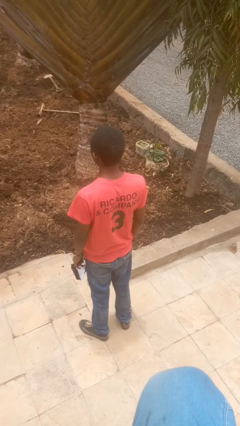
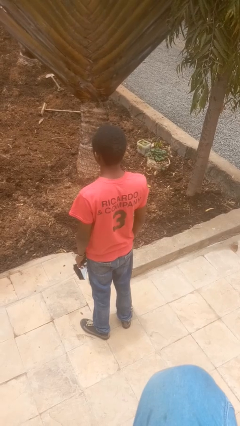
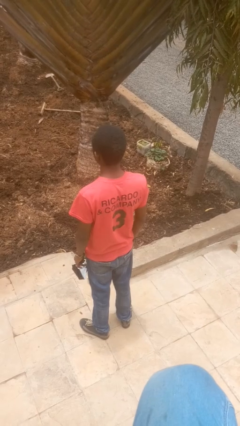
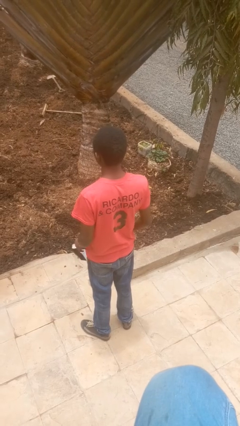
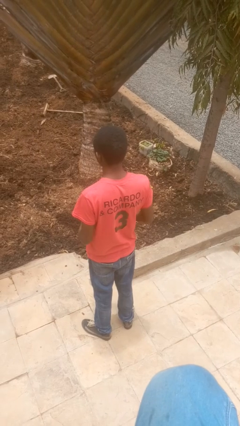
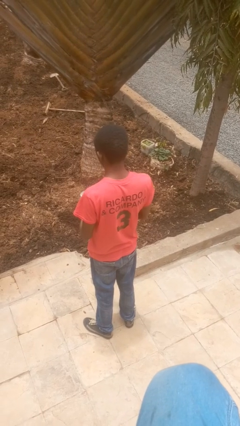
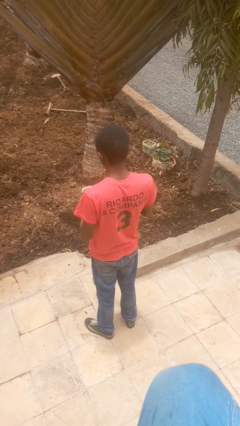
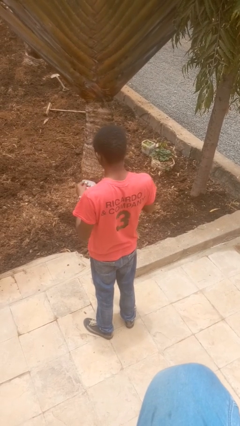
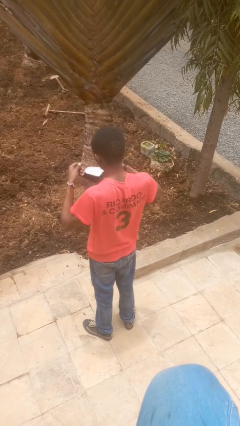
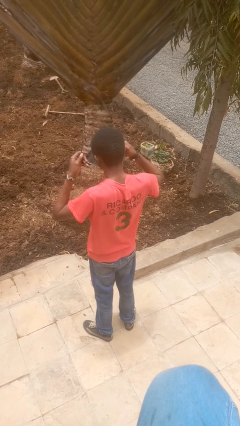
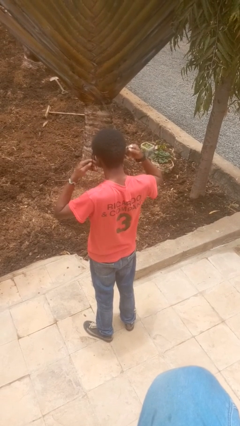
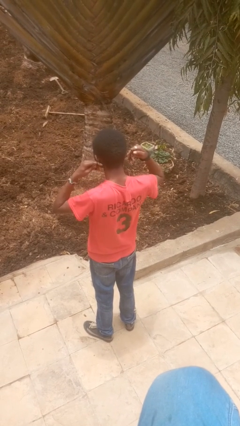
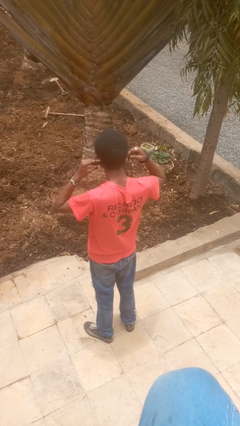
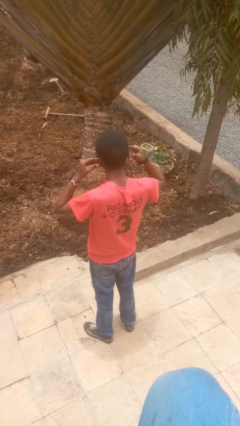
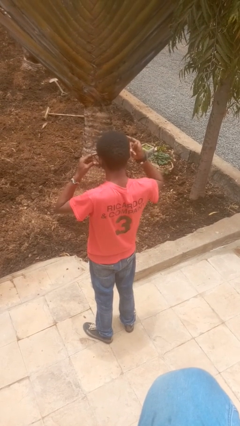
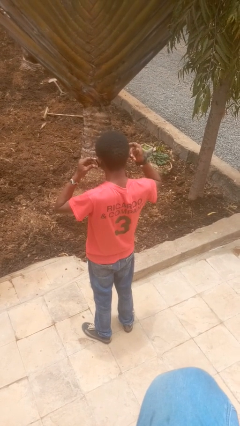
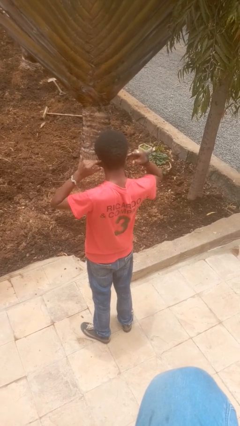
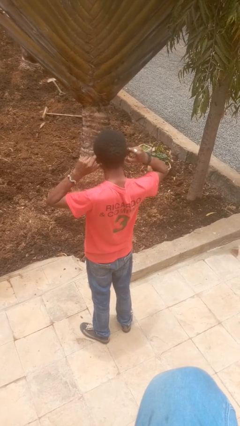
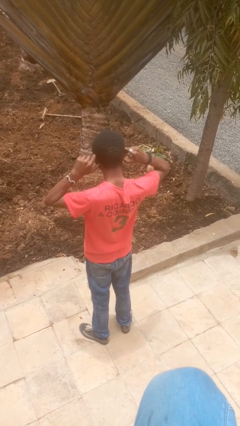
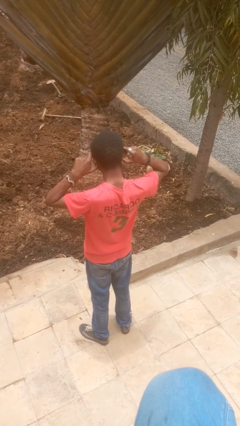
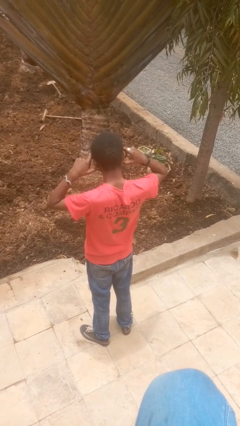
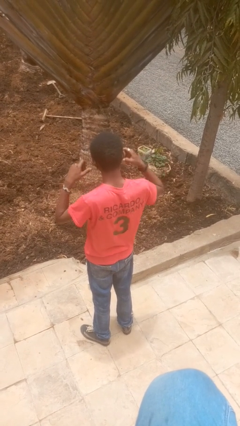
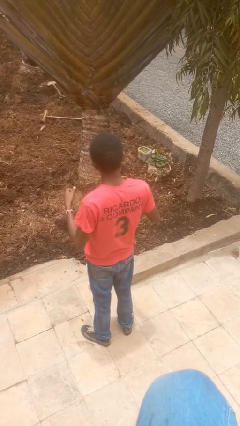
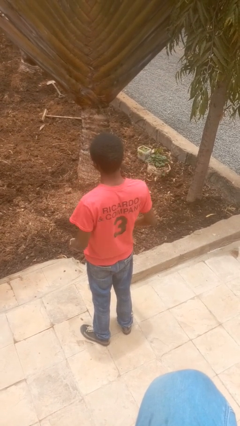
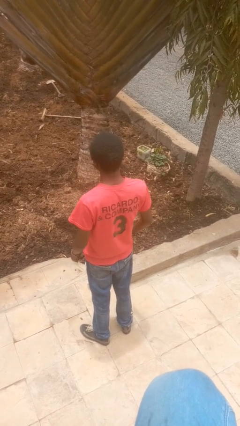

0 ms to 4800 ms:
person puts on facemask

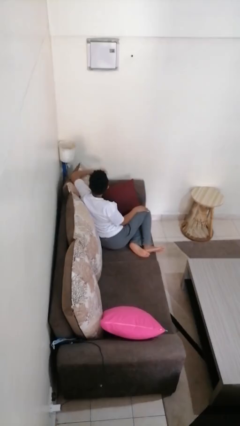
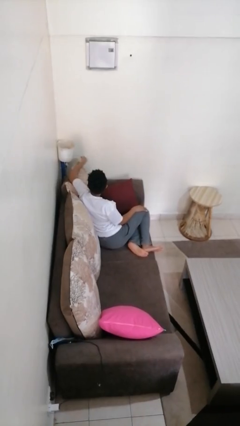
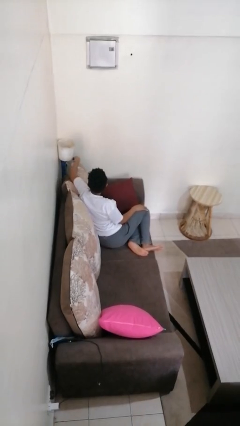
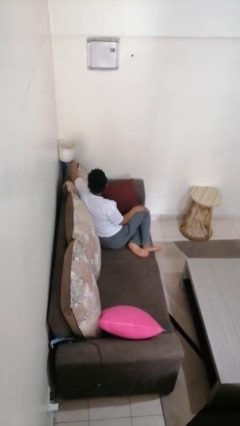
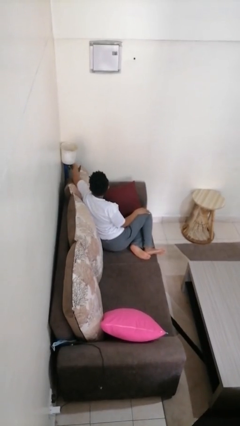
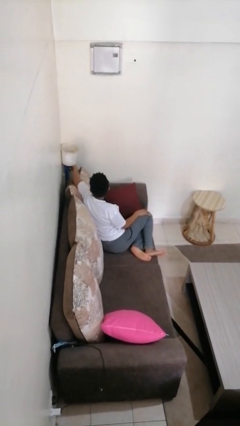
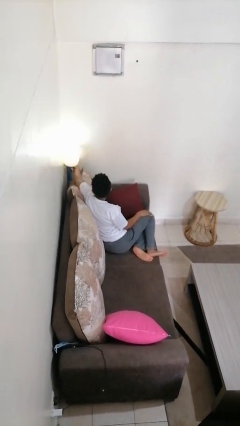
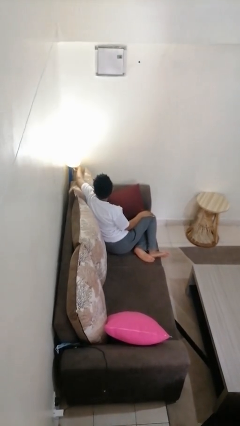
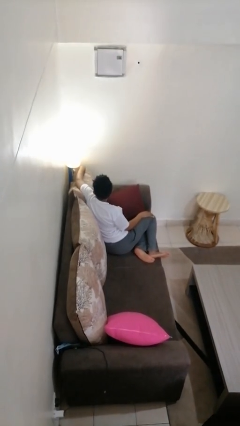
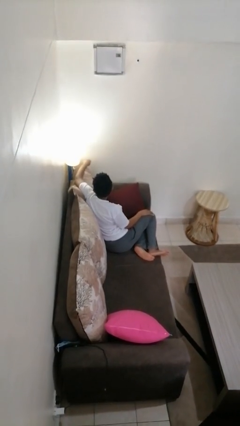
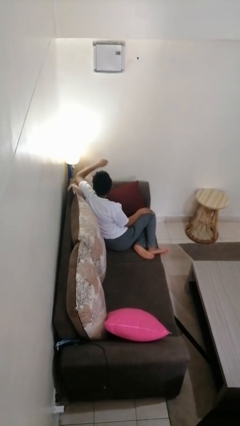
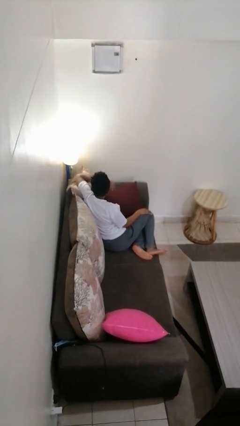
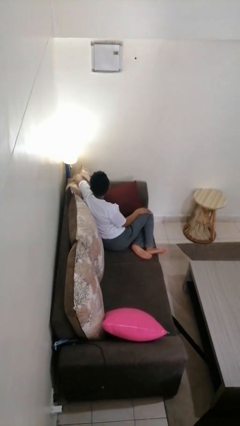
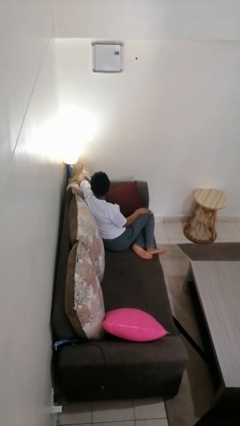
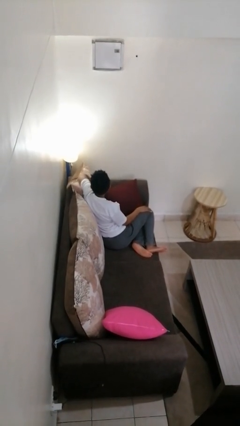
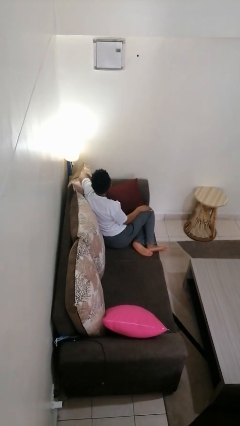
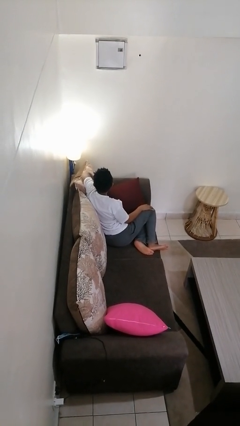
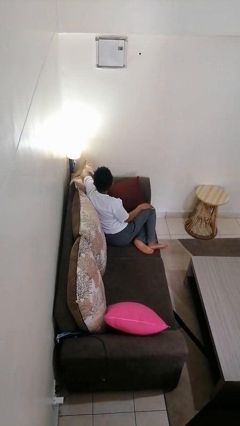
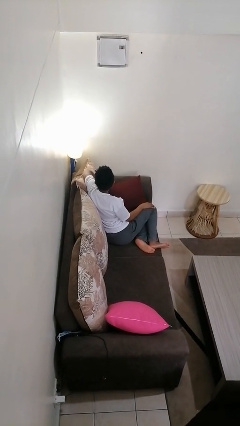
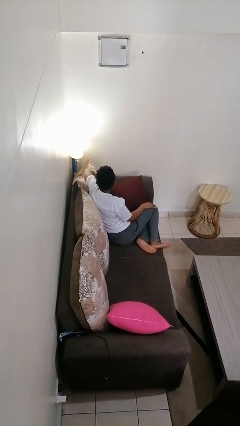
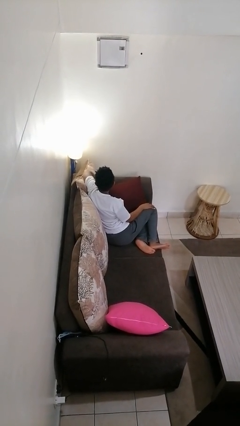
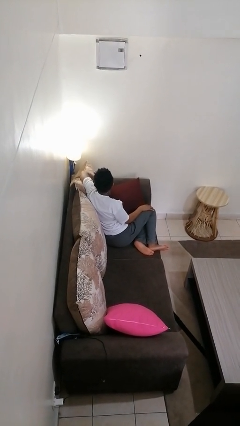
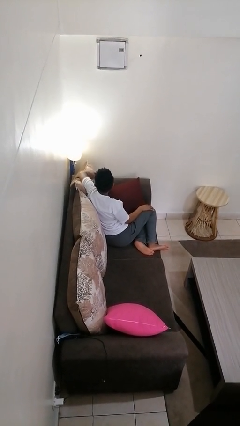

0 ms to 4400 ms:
person turns on lamp

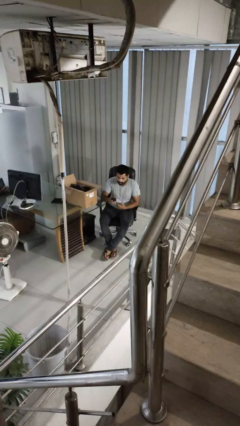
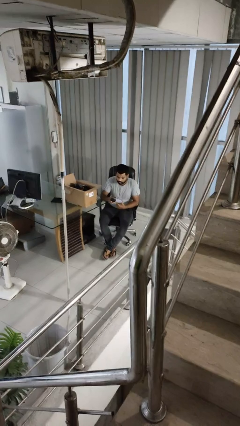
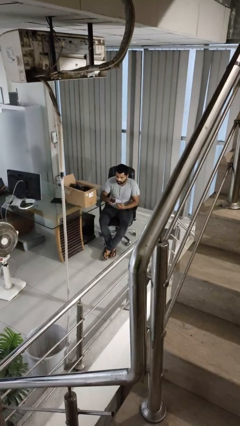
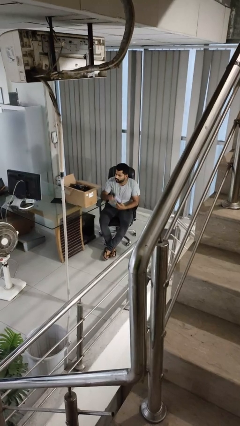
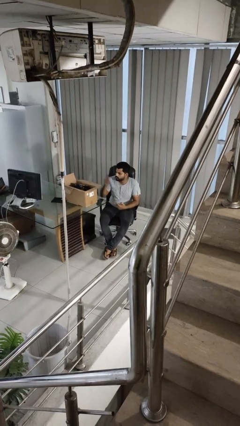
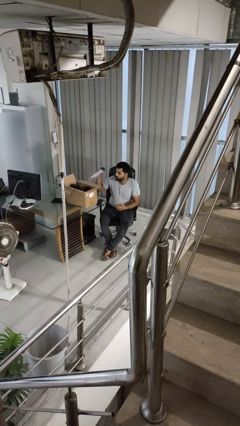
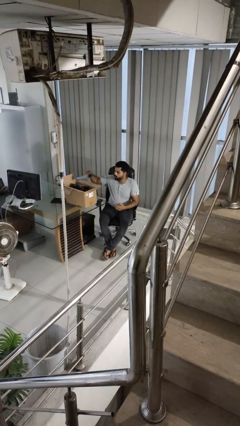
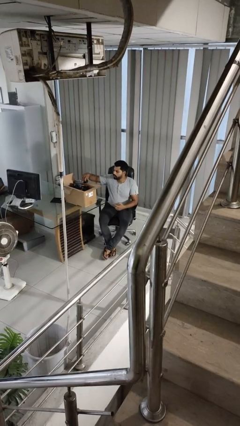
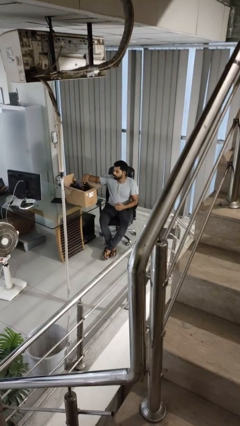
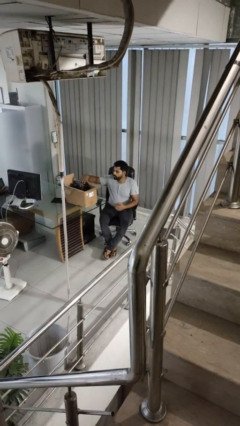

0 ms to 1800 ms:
person puts object into box

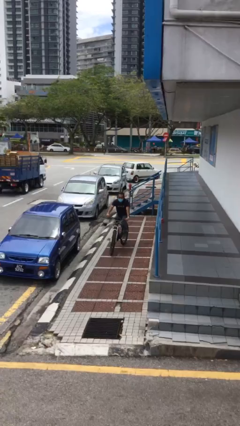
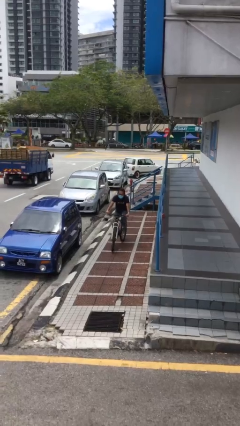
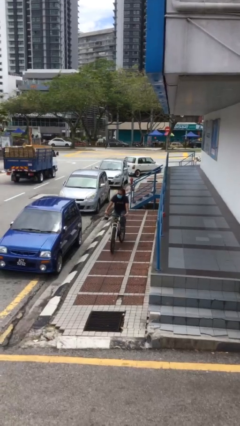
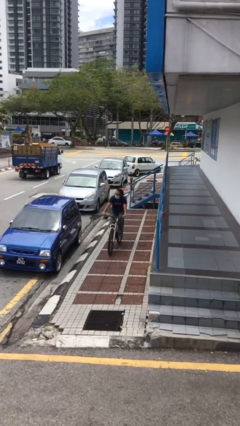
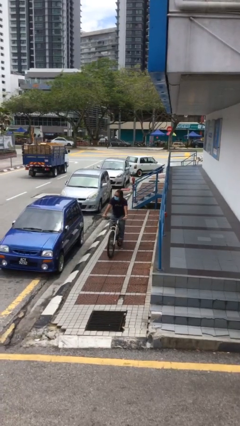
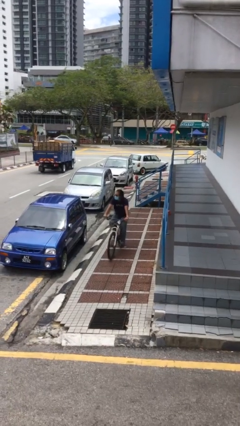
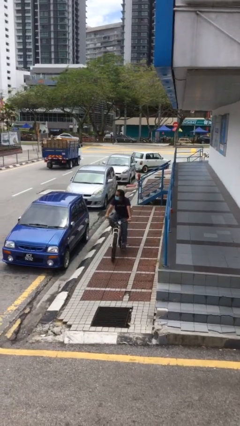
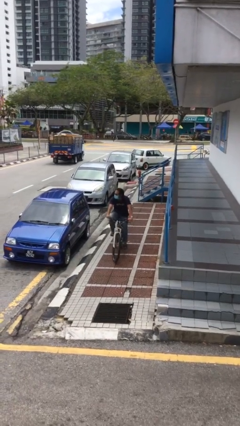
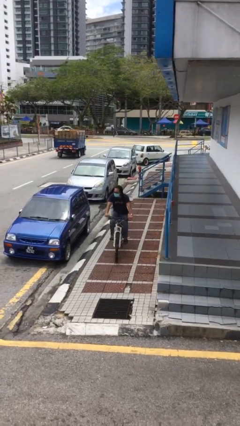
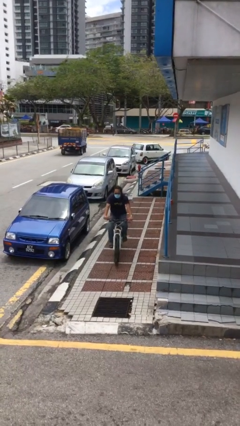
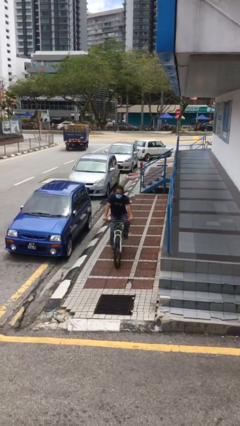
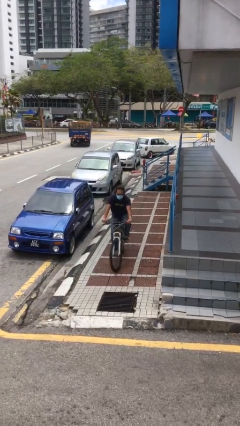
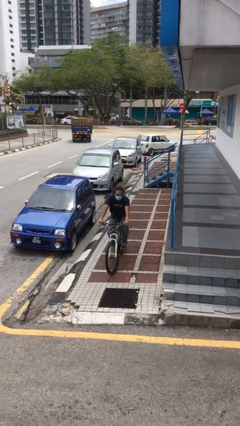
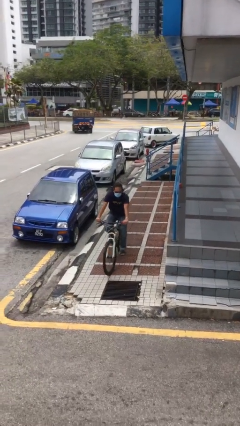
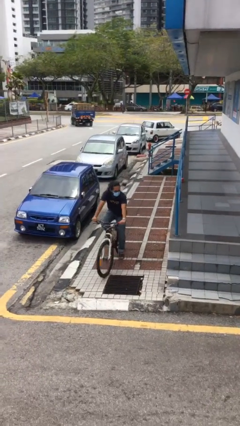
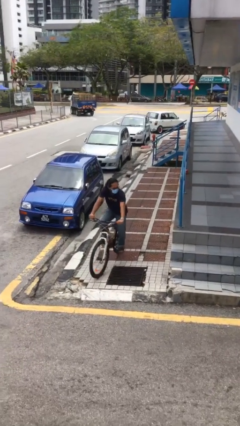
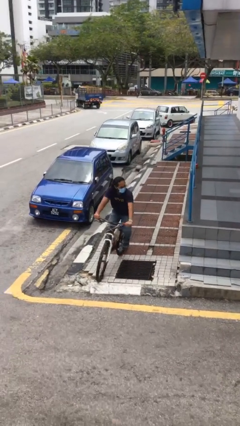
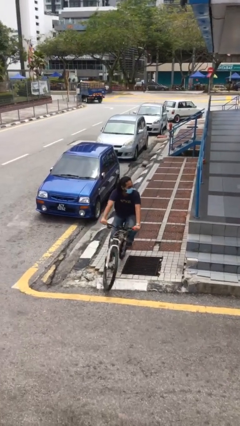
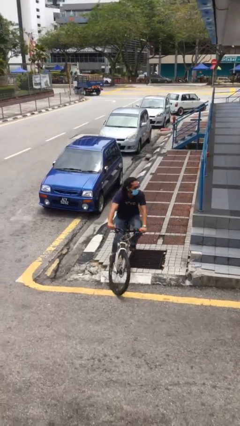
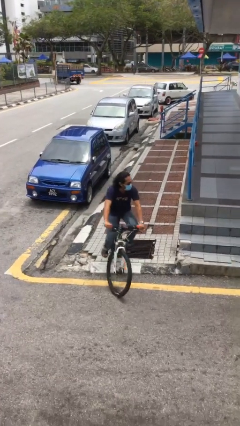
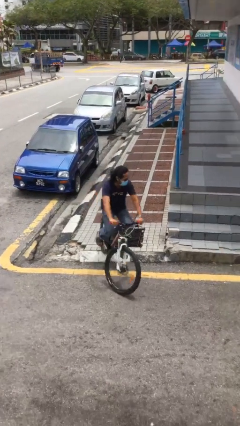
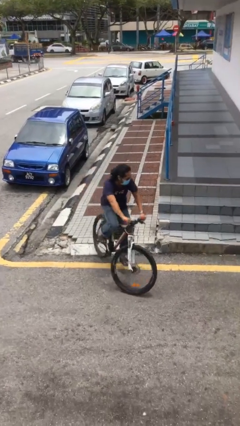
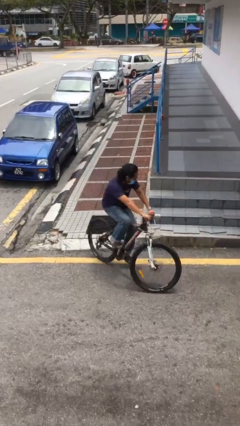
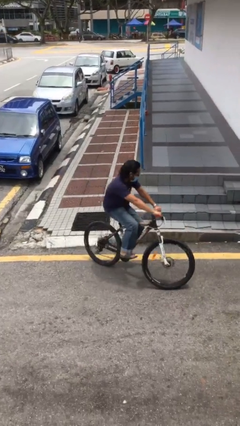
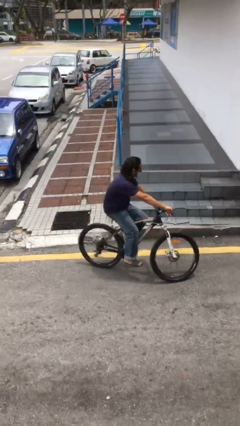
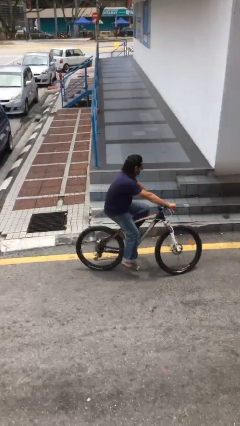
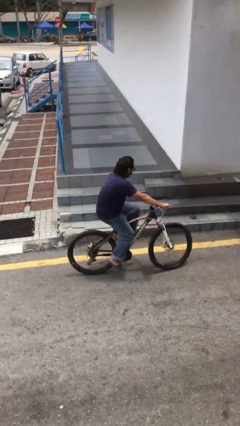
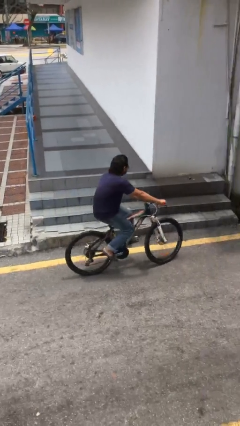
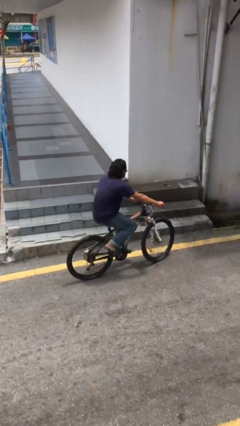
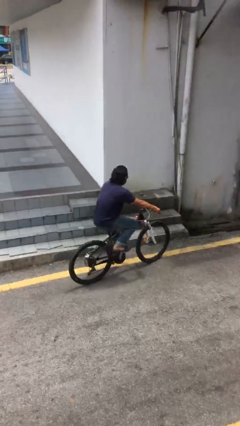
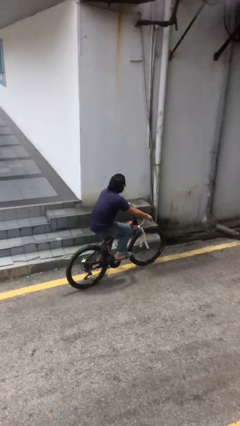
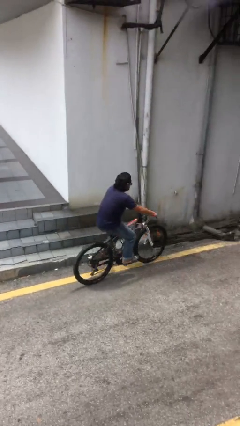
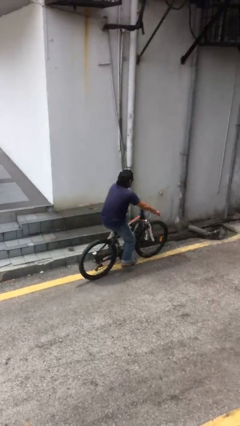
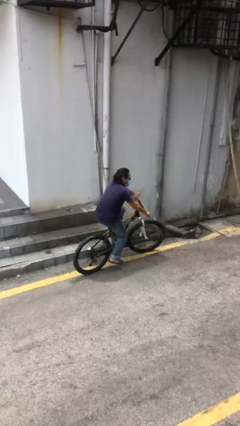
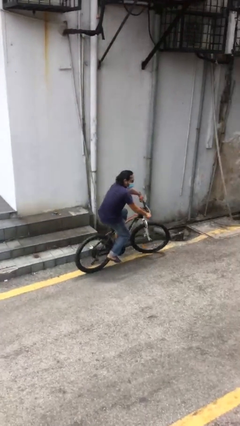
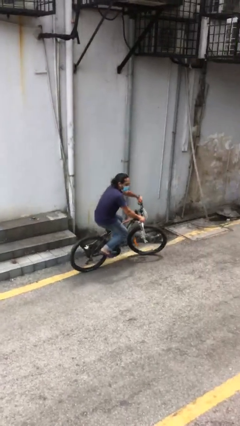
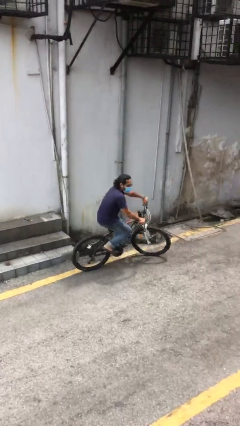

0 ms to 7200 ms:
person rides bicycle
